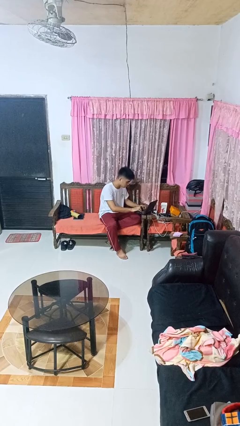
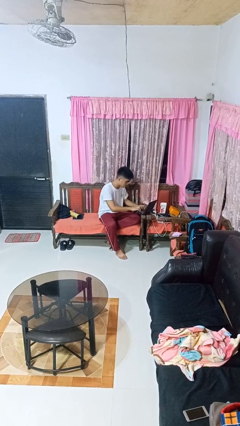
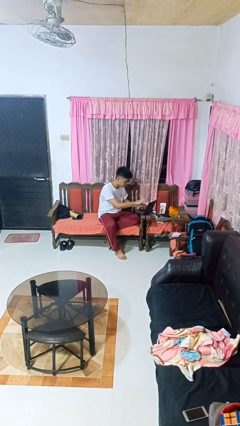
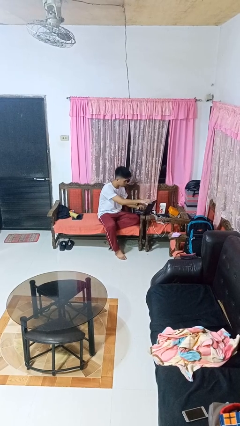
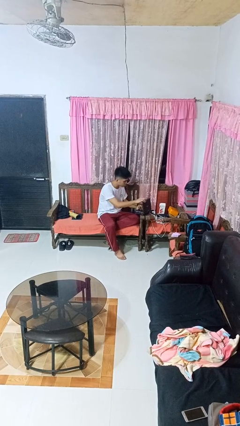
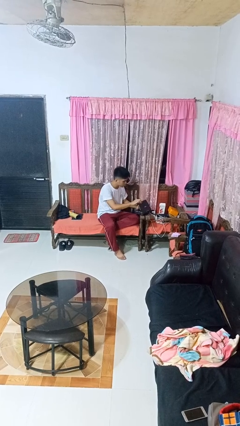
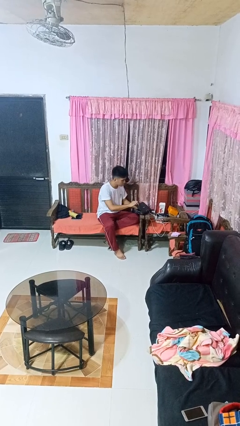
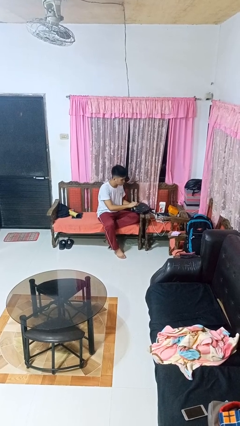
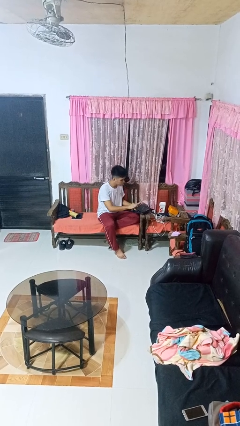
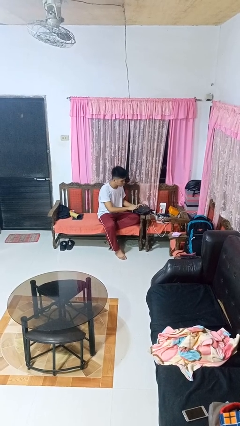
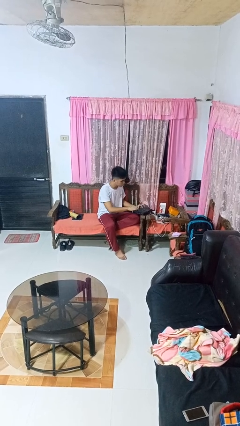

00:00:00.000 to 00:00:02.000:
person closes laptop

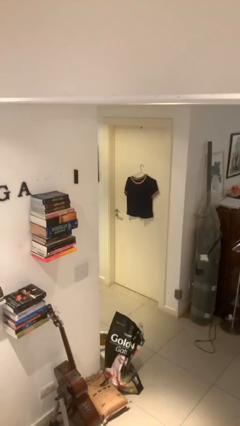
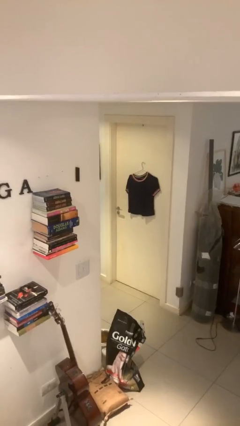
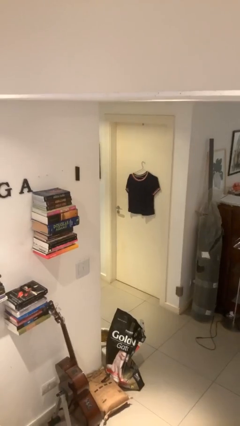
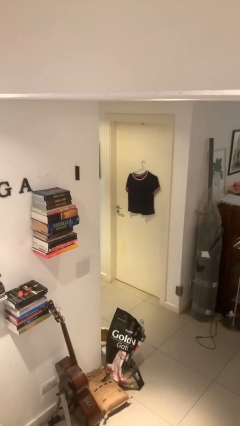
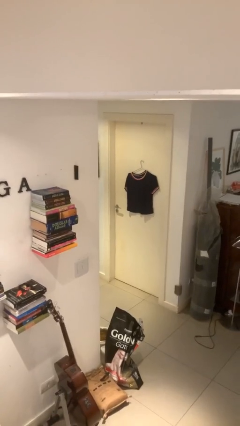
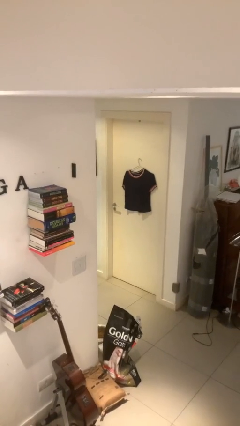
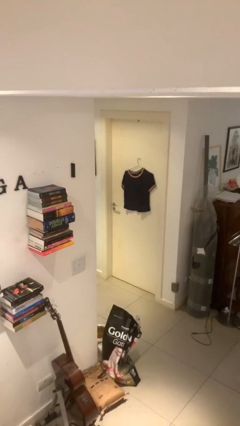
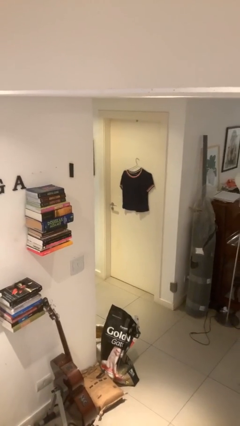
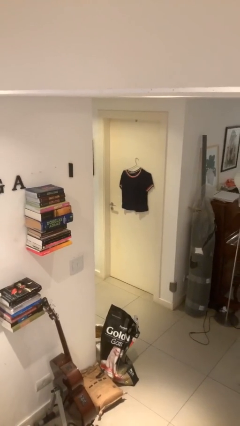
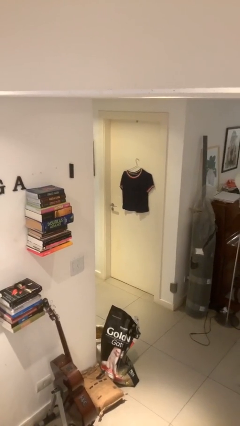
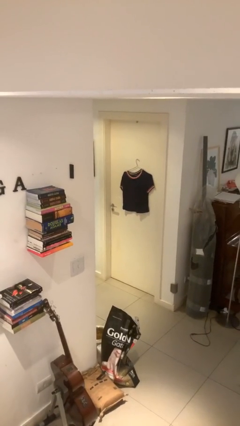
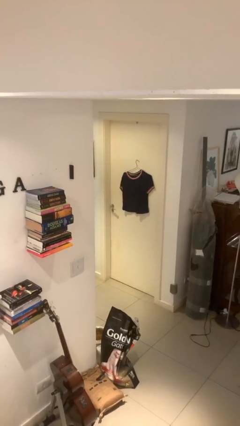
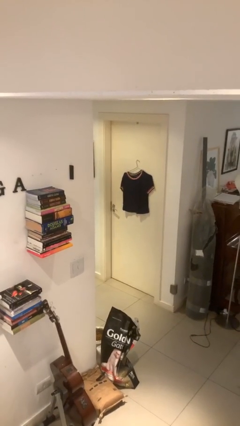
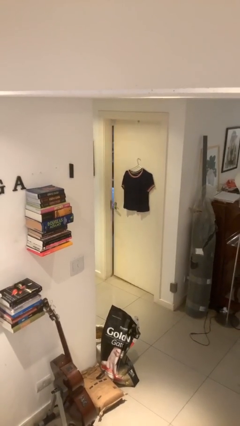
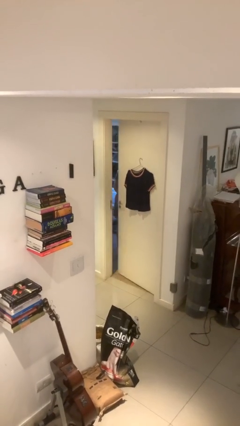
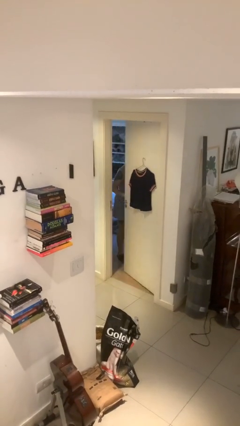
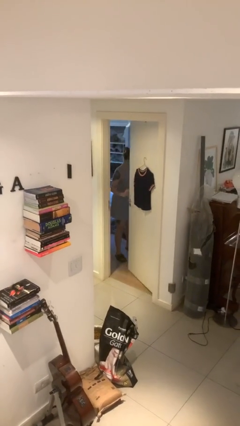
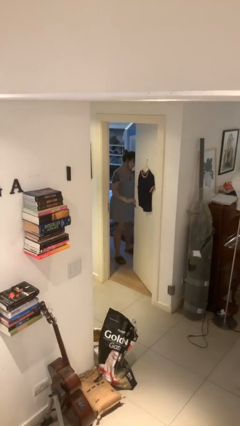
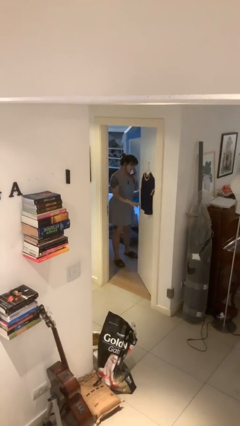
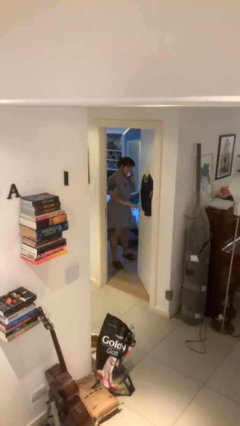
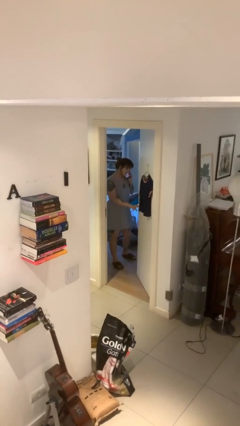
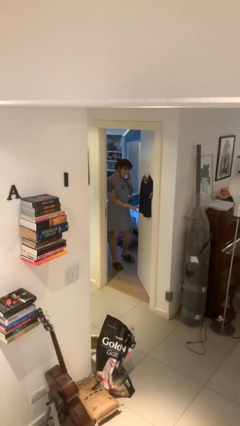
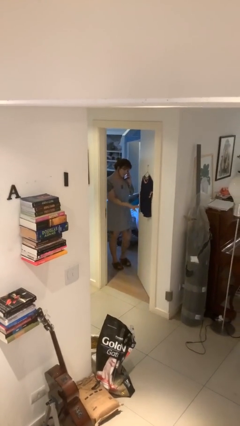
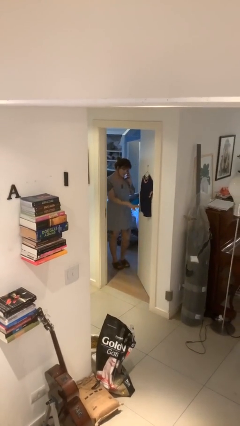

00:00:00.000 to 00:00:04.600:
person opens facility door

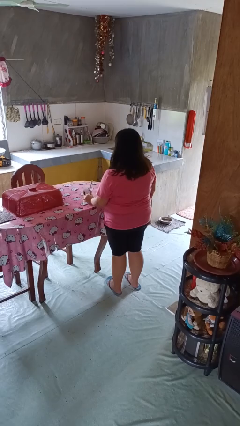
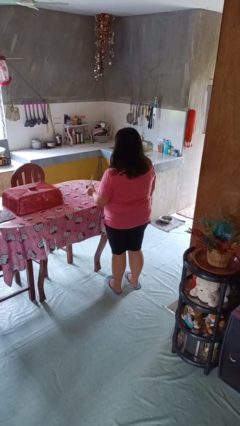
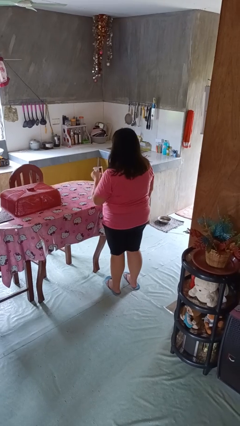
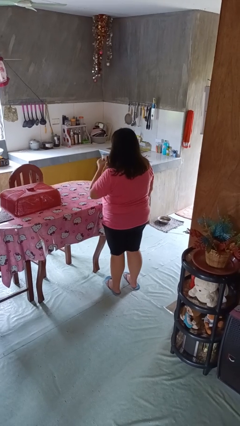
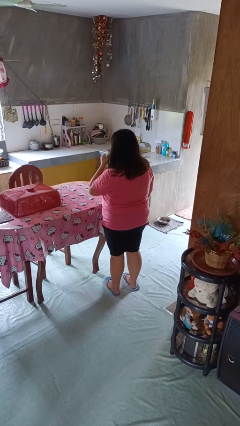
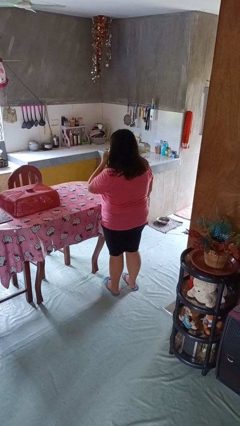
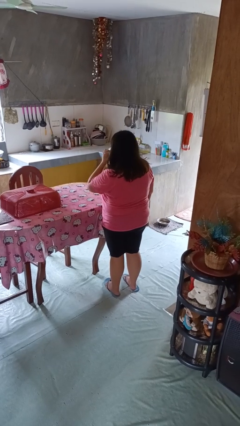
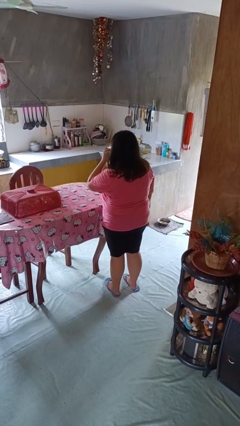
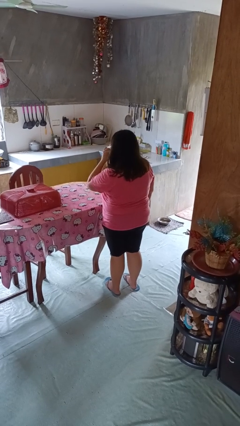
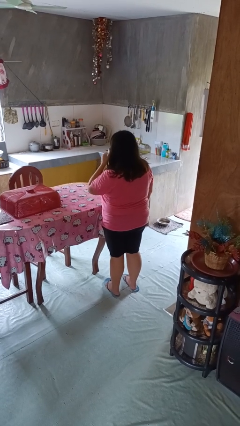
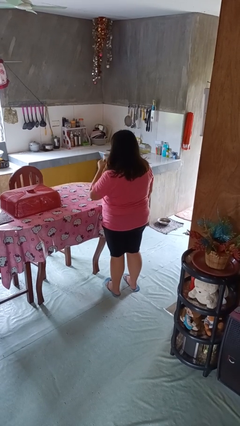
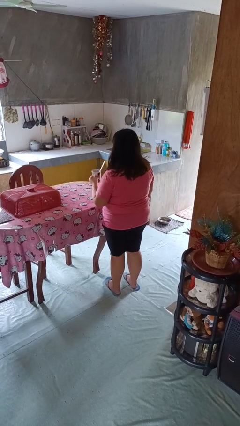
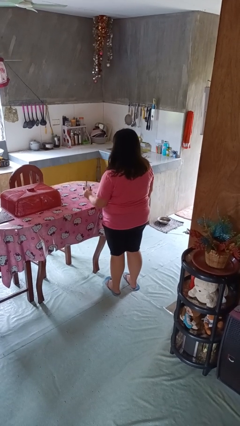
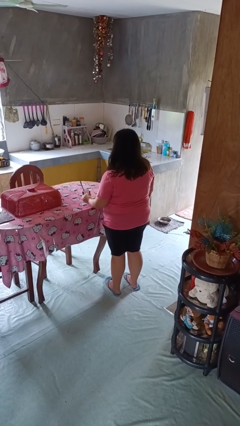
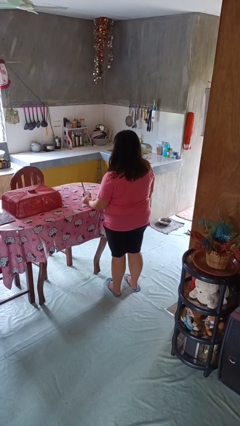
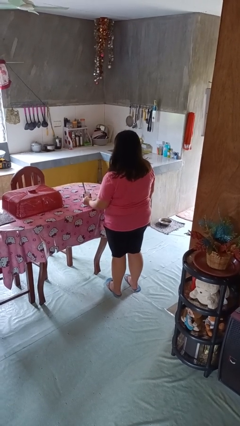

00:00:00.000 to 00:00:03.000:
person drinks from mug

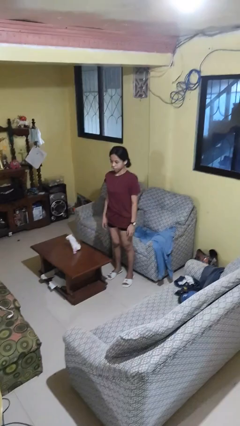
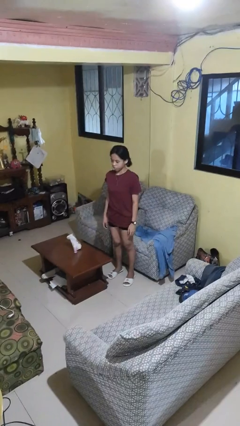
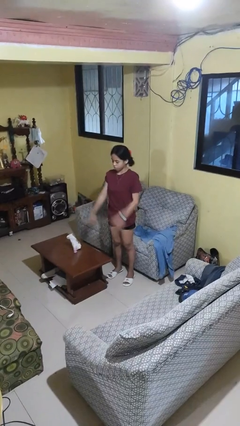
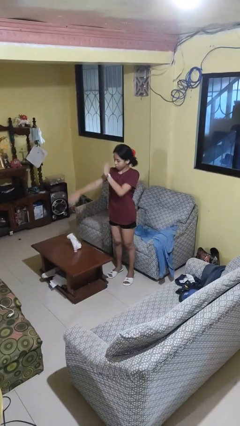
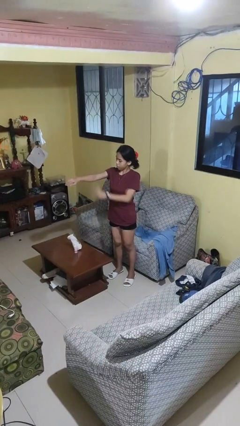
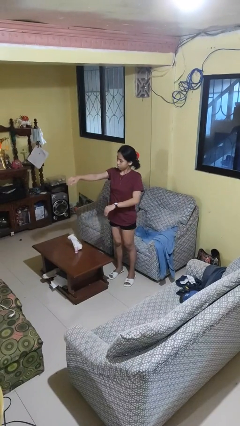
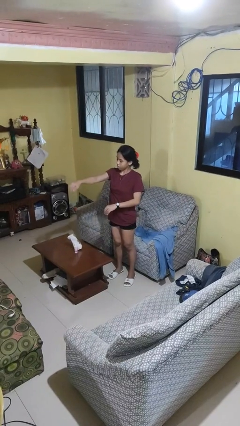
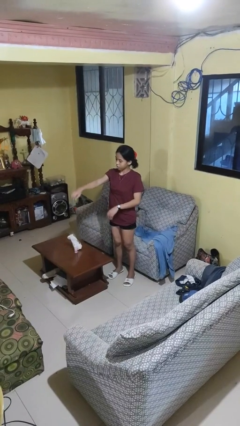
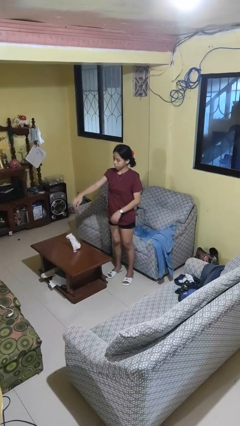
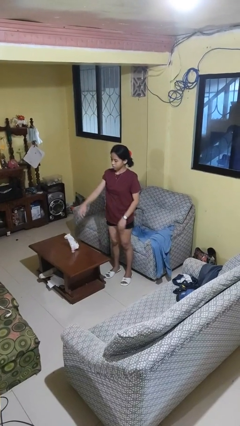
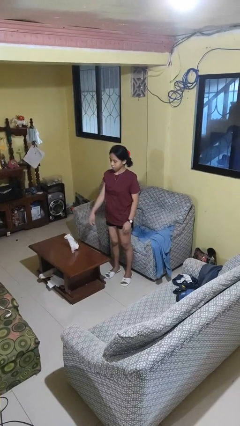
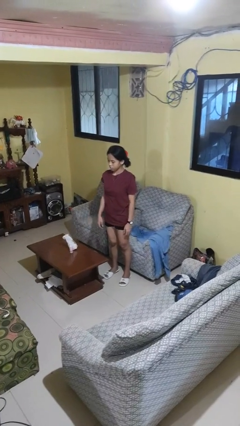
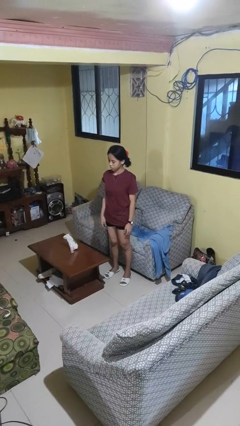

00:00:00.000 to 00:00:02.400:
person swats bug

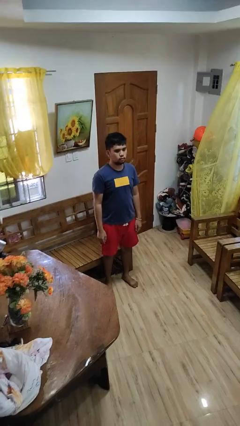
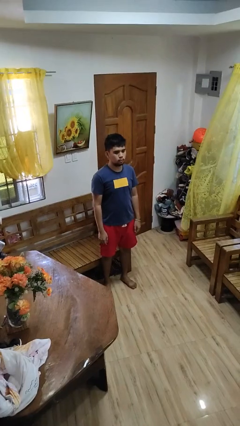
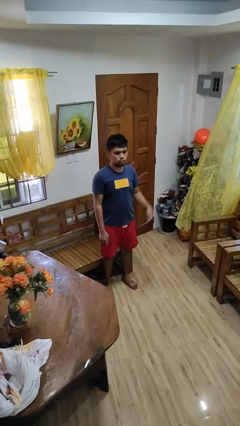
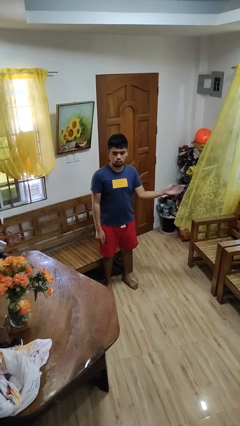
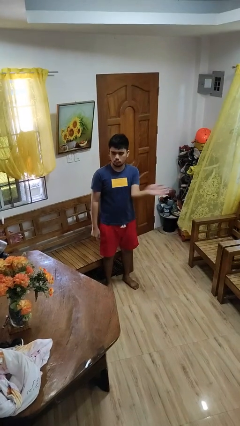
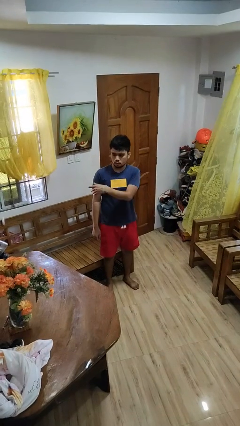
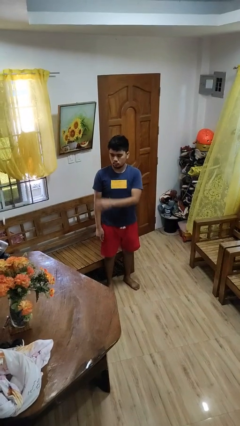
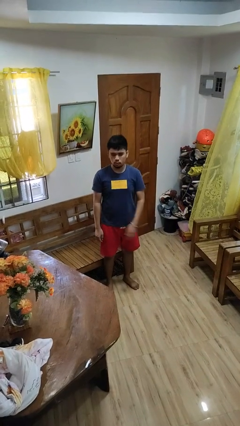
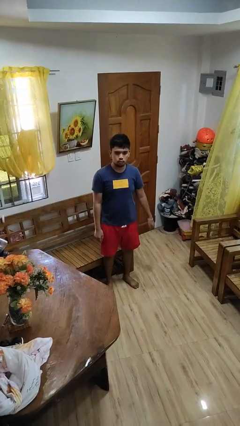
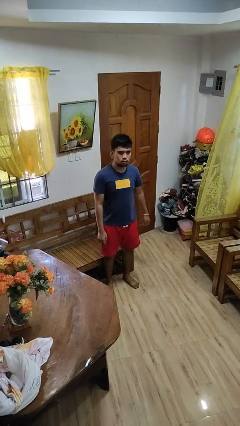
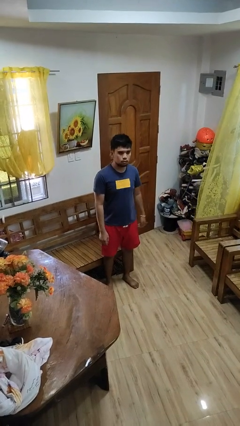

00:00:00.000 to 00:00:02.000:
person gestures swipe right

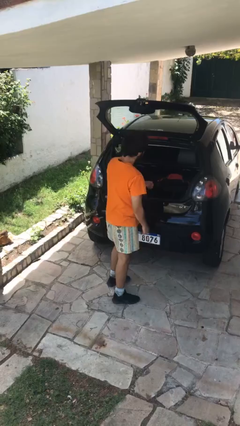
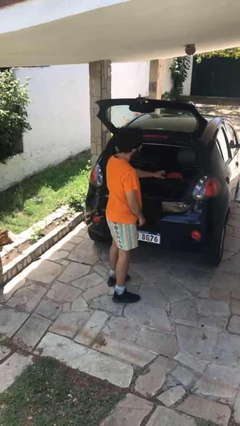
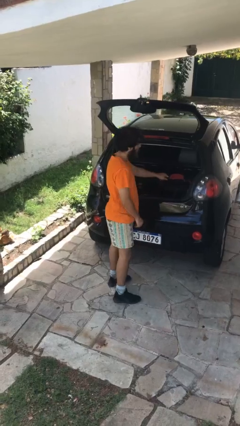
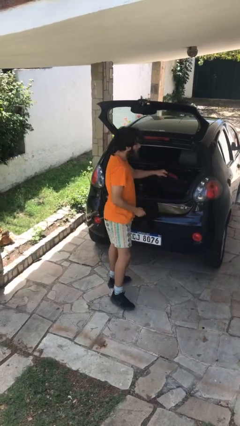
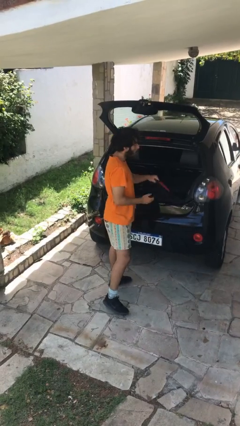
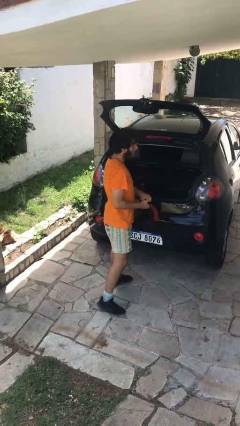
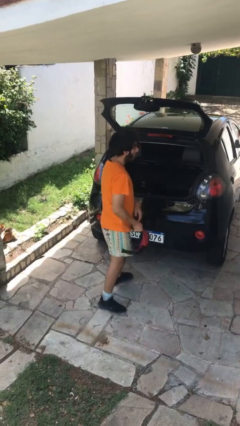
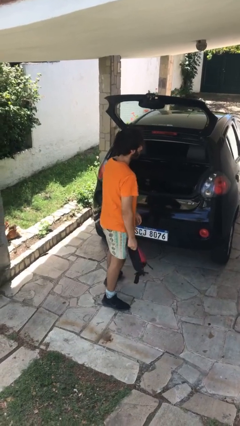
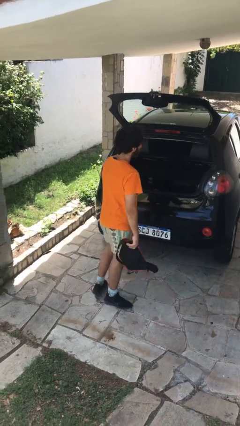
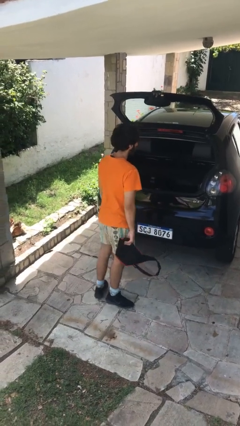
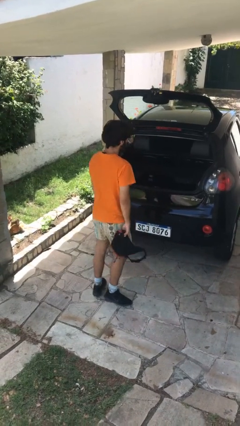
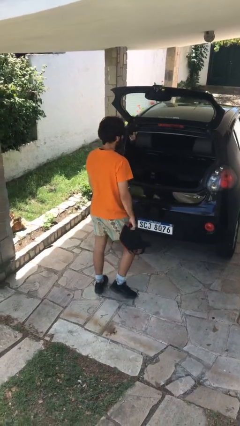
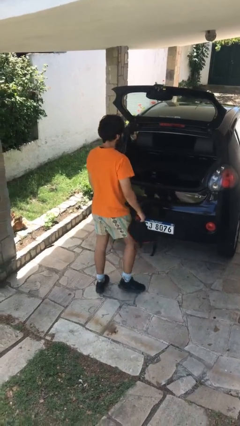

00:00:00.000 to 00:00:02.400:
person unloads car

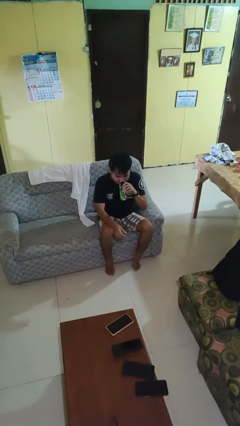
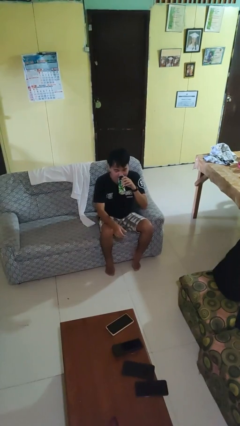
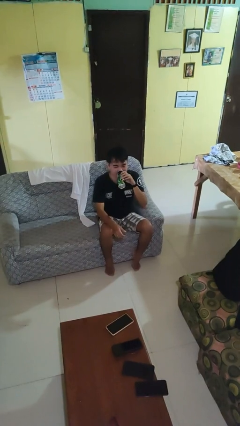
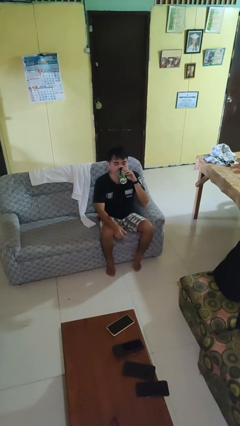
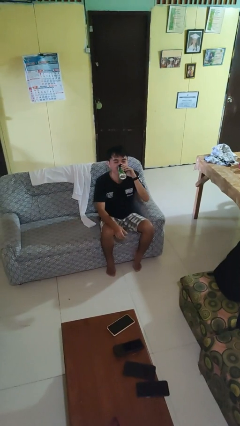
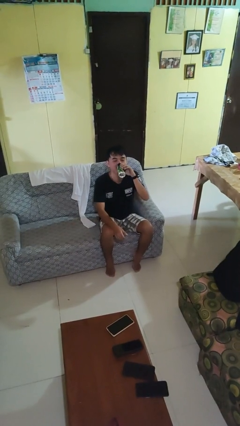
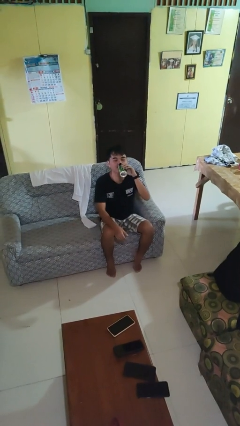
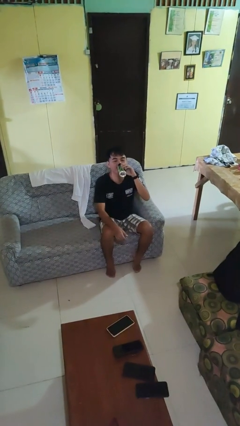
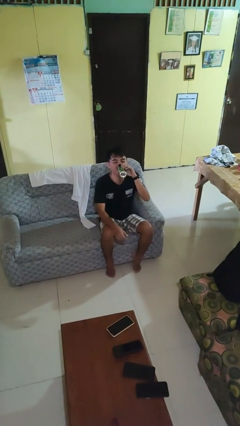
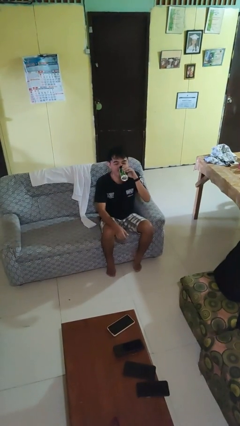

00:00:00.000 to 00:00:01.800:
person drinks from beverage can
